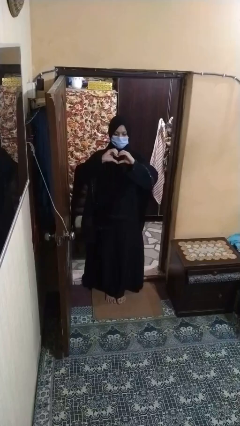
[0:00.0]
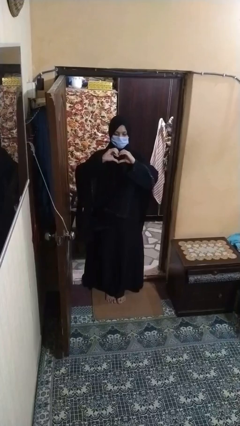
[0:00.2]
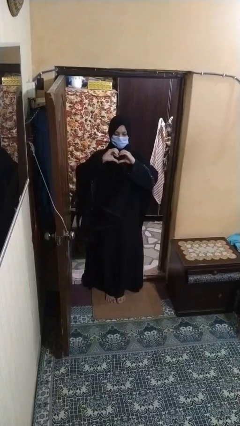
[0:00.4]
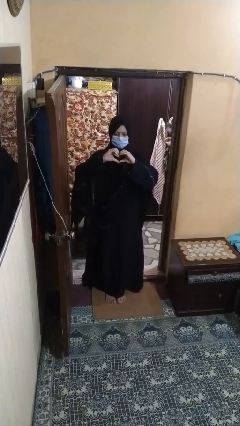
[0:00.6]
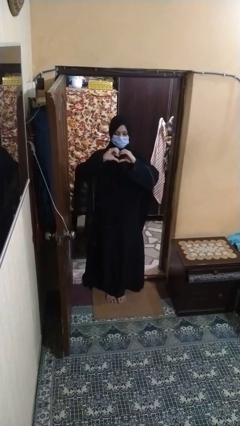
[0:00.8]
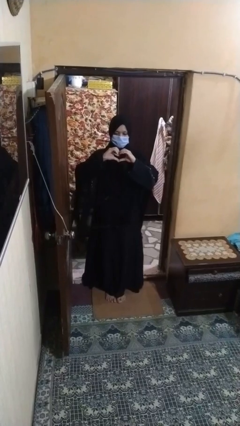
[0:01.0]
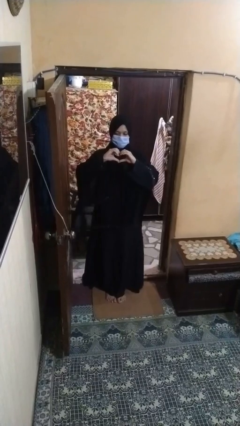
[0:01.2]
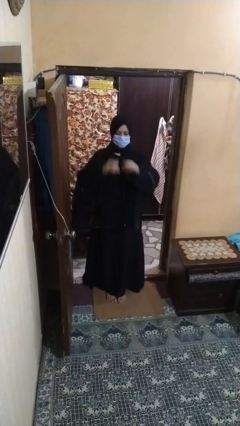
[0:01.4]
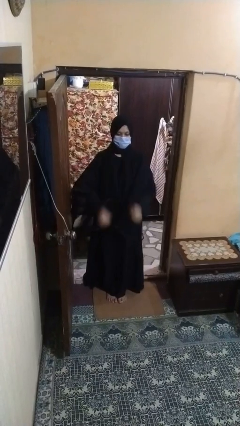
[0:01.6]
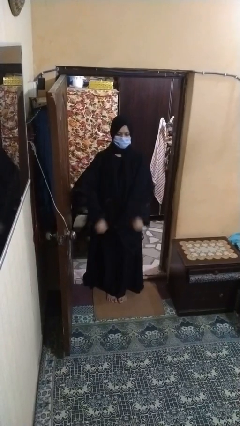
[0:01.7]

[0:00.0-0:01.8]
person gestures heart

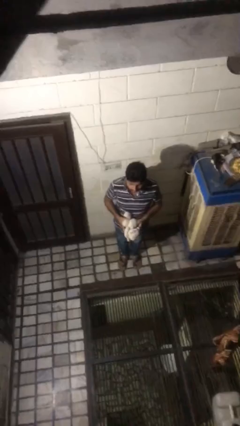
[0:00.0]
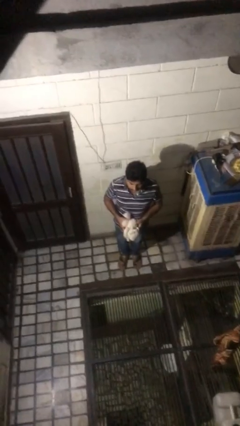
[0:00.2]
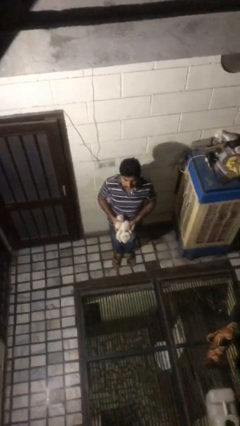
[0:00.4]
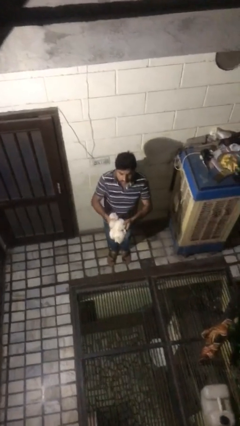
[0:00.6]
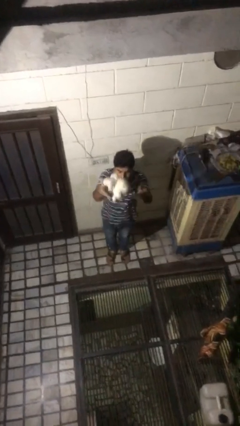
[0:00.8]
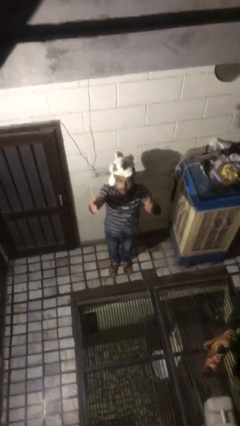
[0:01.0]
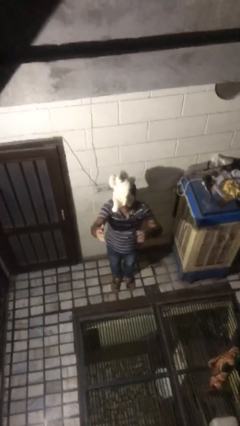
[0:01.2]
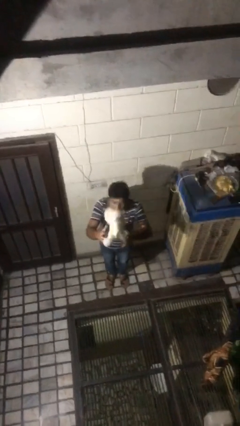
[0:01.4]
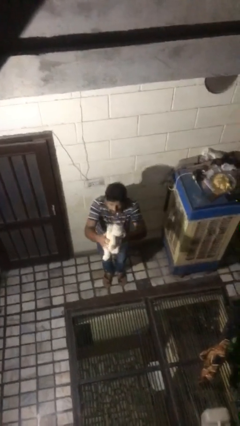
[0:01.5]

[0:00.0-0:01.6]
person drops object

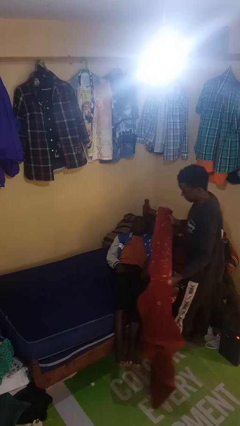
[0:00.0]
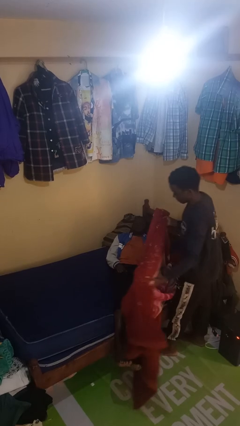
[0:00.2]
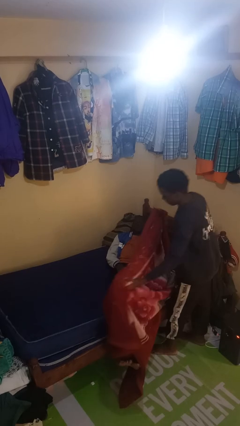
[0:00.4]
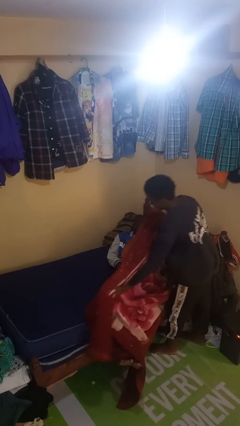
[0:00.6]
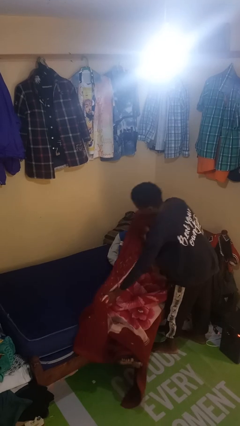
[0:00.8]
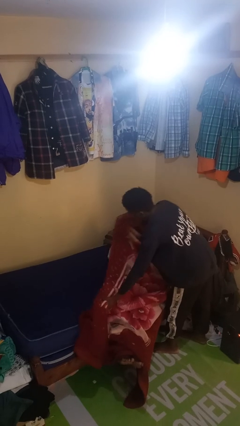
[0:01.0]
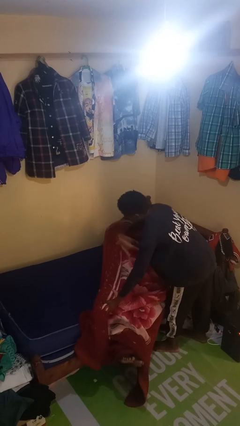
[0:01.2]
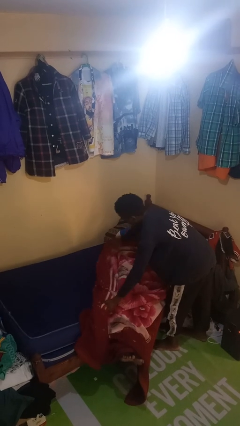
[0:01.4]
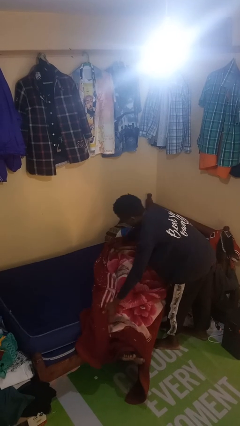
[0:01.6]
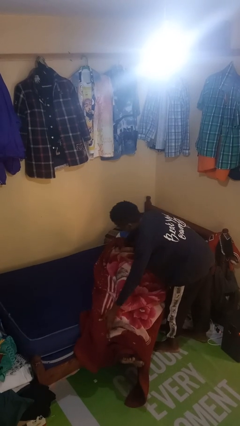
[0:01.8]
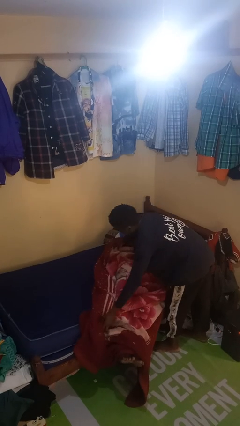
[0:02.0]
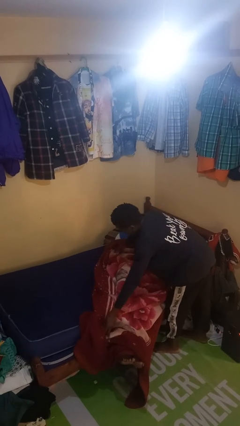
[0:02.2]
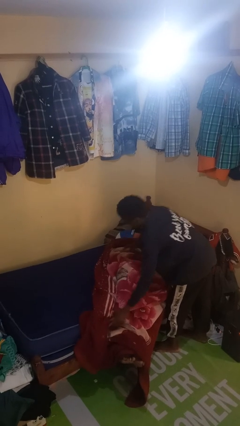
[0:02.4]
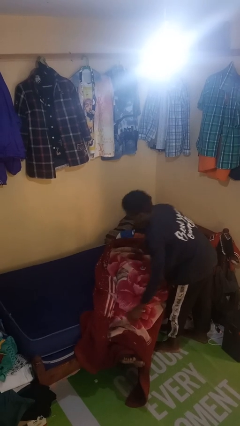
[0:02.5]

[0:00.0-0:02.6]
person covers friend with blanket

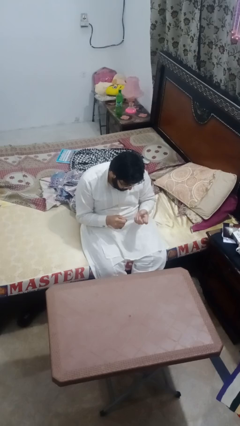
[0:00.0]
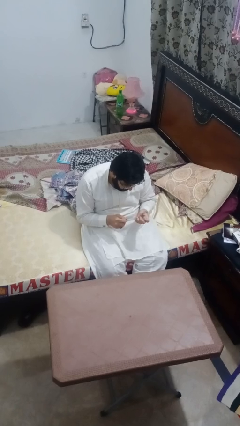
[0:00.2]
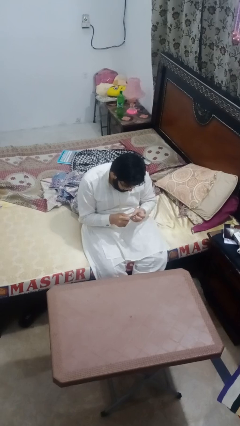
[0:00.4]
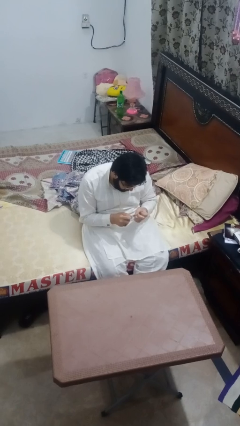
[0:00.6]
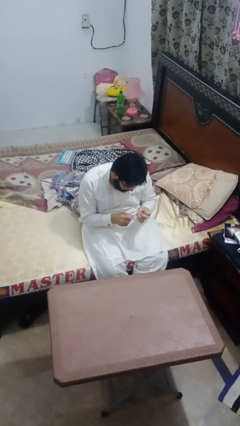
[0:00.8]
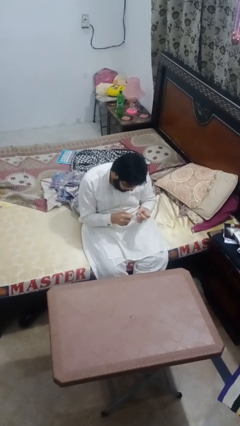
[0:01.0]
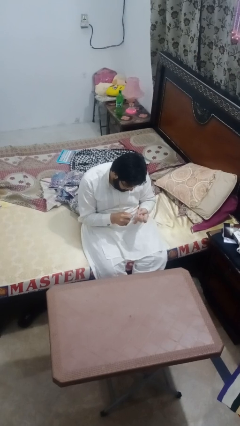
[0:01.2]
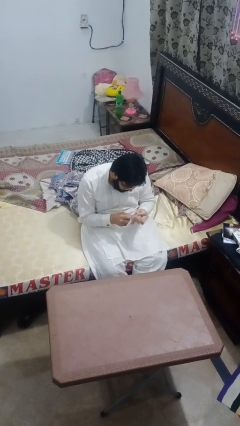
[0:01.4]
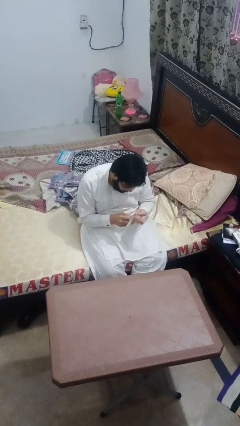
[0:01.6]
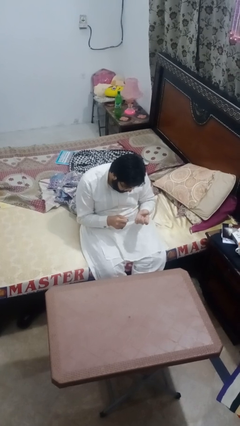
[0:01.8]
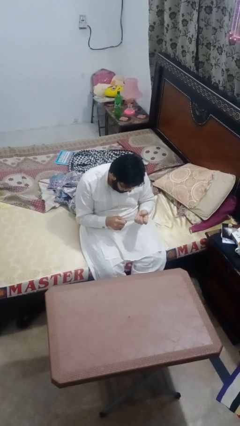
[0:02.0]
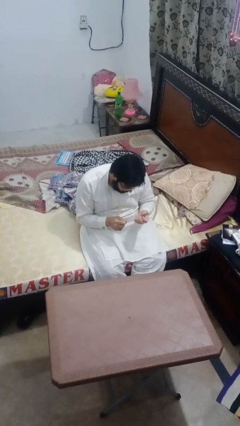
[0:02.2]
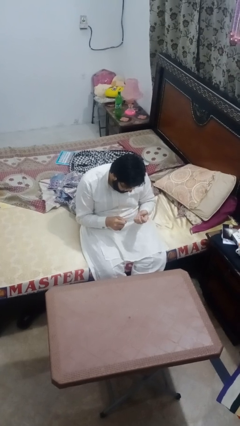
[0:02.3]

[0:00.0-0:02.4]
person files fingernails

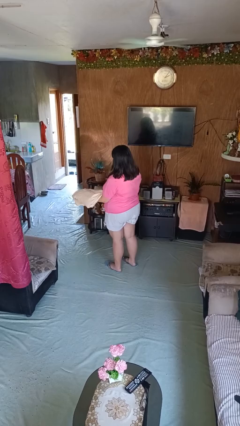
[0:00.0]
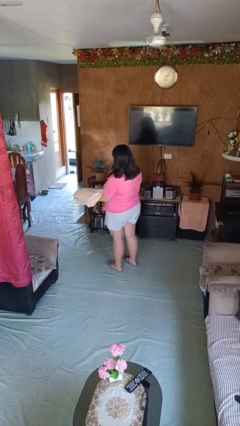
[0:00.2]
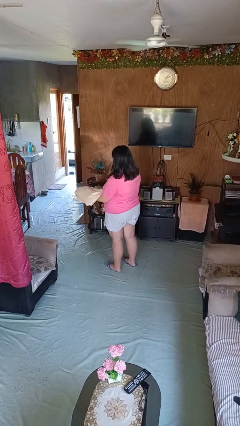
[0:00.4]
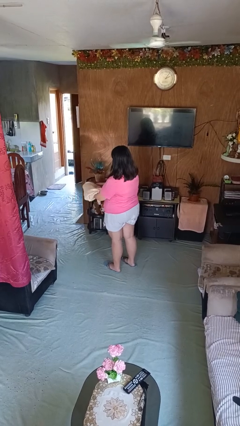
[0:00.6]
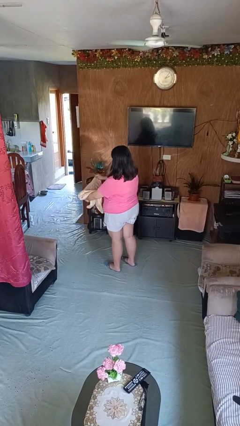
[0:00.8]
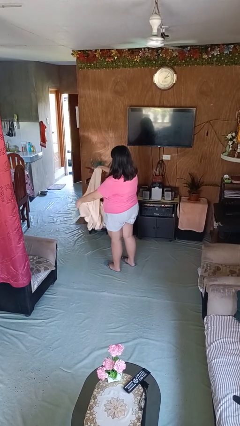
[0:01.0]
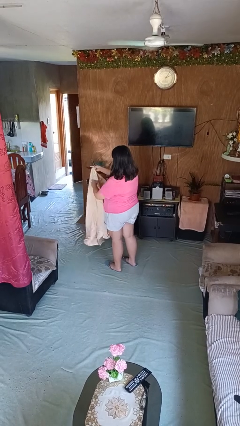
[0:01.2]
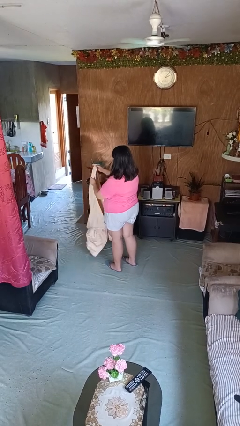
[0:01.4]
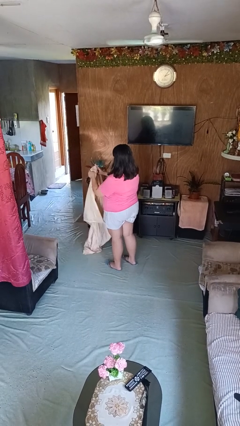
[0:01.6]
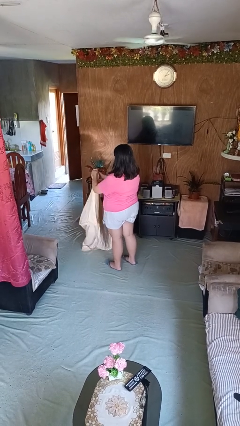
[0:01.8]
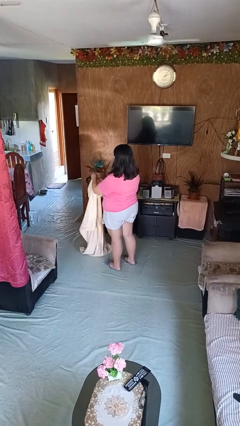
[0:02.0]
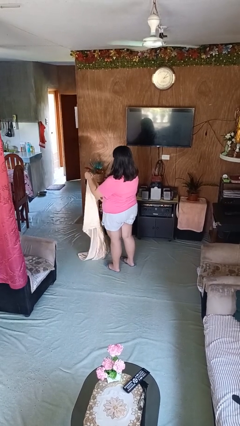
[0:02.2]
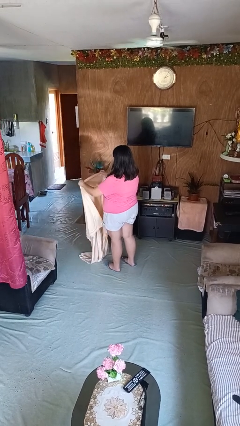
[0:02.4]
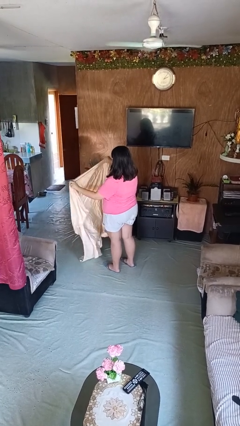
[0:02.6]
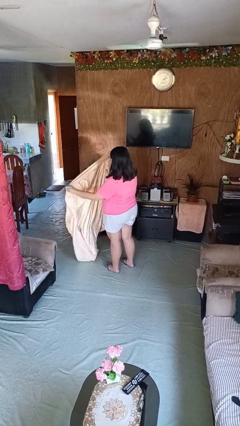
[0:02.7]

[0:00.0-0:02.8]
person unfolds blanket

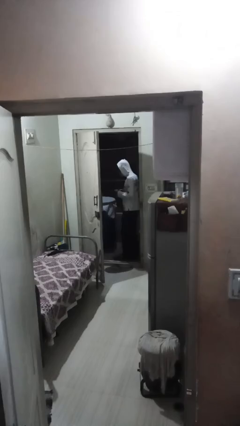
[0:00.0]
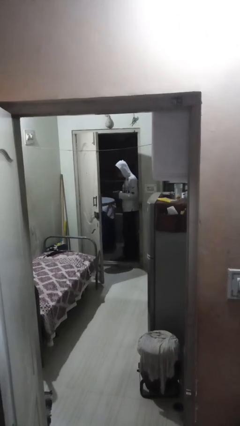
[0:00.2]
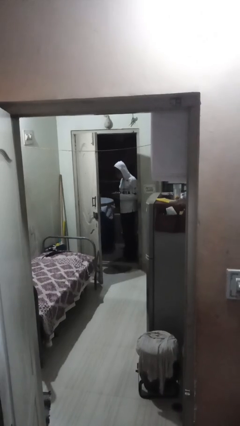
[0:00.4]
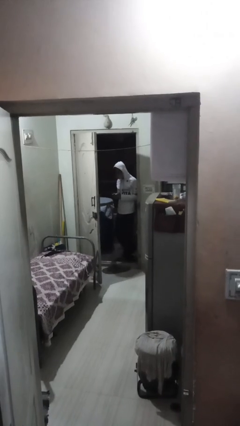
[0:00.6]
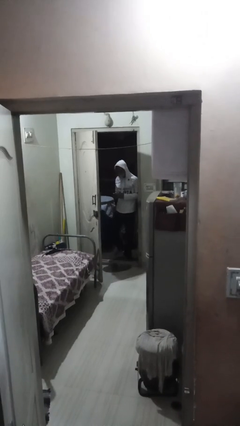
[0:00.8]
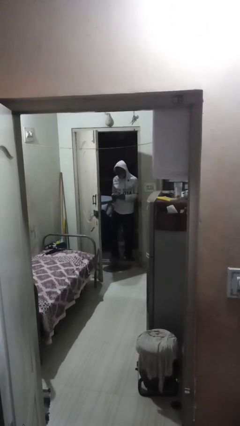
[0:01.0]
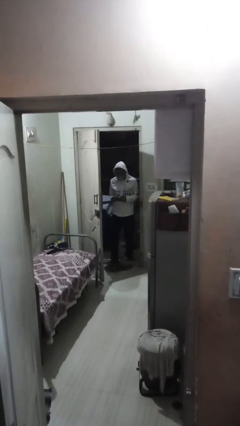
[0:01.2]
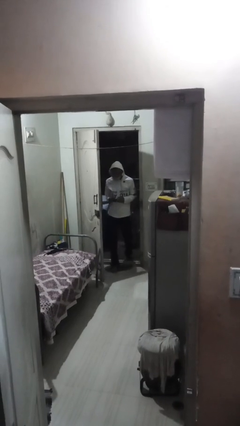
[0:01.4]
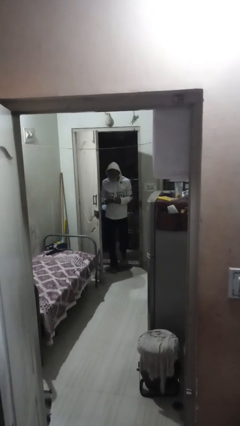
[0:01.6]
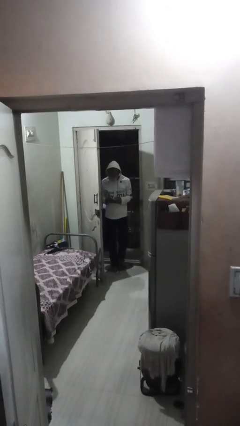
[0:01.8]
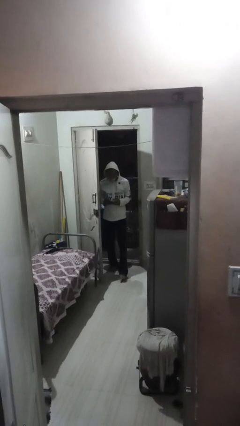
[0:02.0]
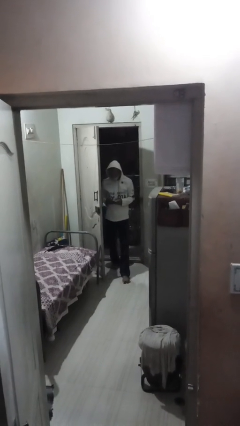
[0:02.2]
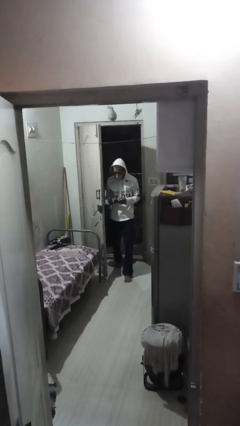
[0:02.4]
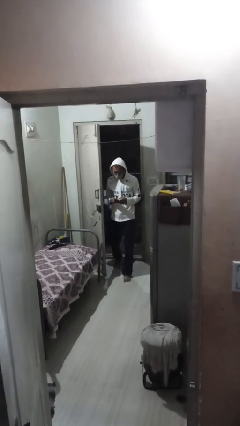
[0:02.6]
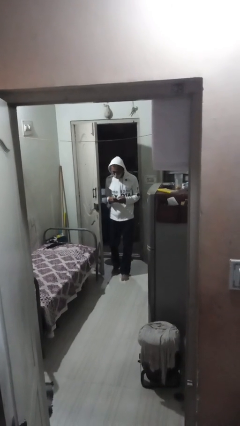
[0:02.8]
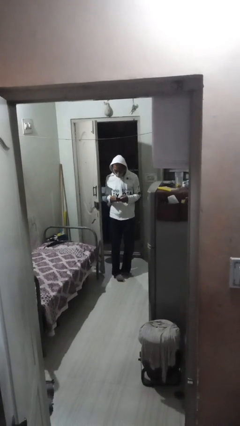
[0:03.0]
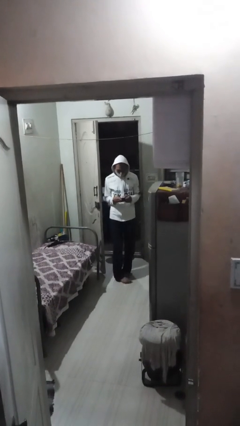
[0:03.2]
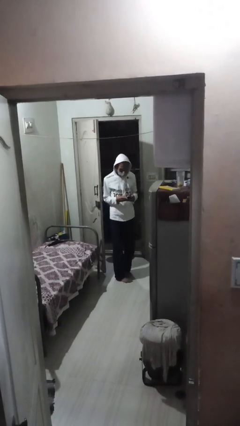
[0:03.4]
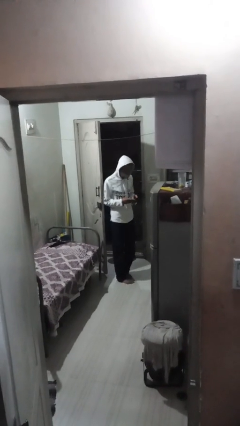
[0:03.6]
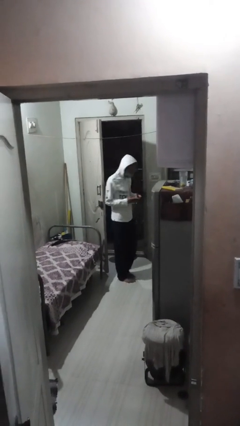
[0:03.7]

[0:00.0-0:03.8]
person enters scene through structure

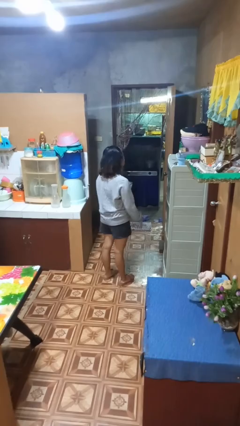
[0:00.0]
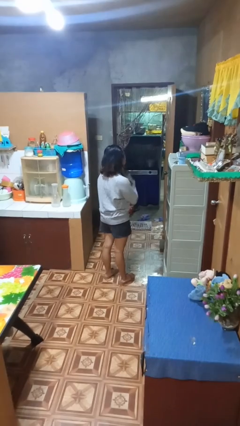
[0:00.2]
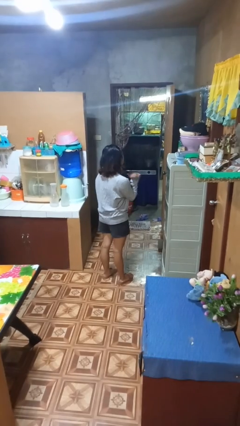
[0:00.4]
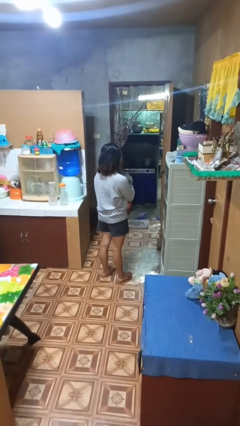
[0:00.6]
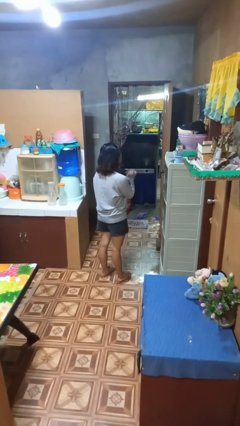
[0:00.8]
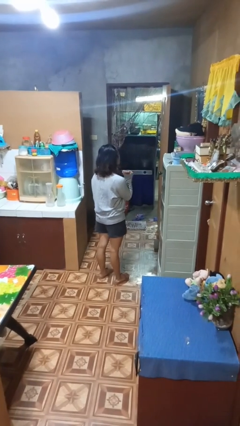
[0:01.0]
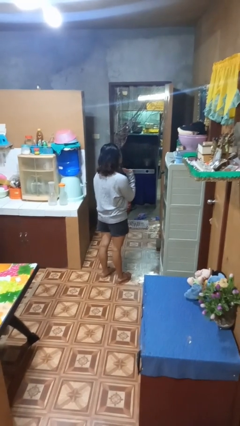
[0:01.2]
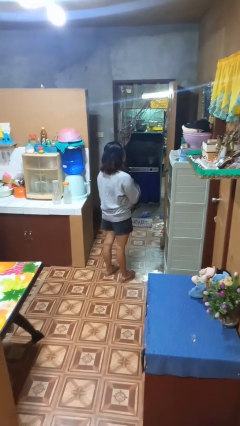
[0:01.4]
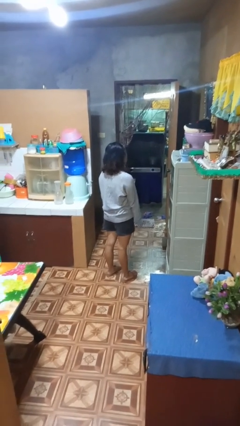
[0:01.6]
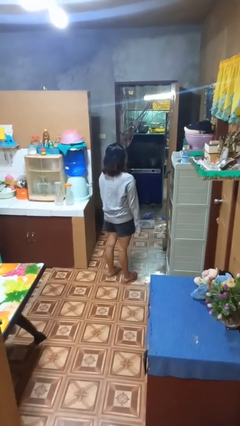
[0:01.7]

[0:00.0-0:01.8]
person gestures cut

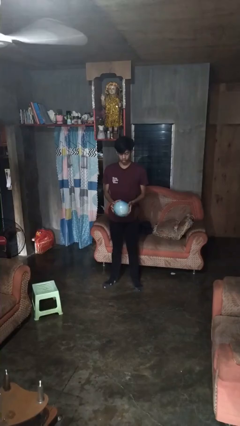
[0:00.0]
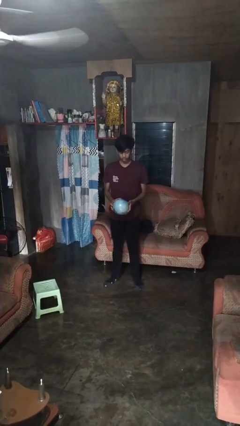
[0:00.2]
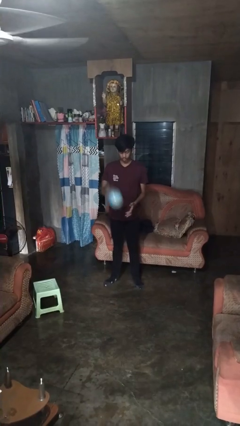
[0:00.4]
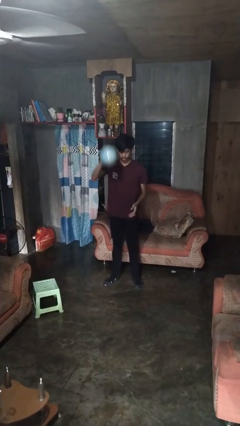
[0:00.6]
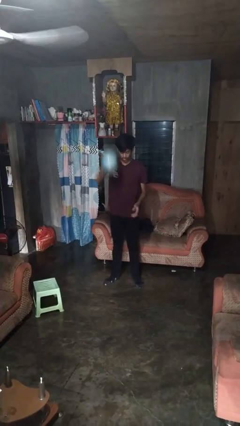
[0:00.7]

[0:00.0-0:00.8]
person bounces ball on floor
